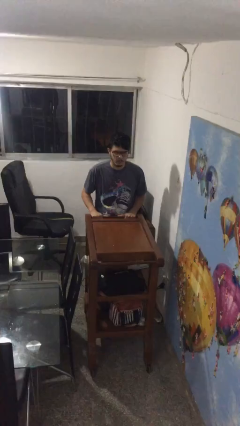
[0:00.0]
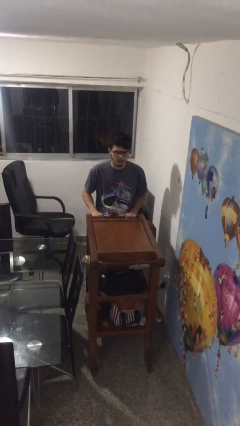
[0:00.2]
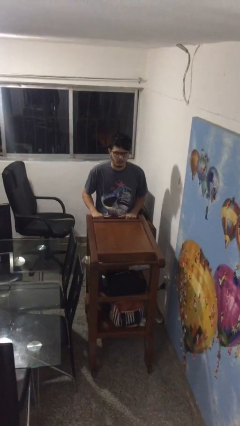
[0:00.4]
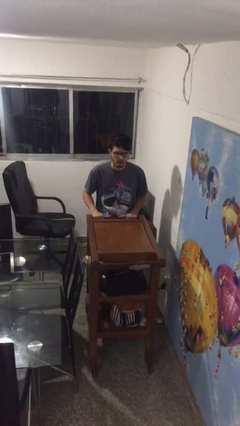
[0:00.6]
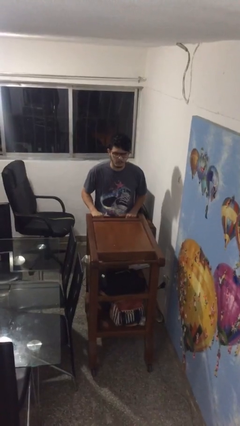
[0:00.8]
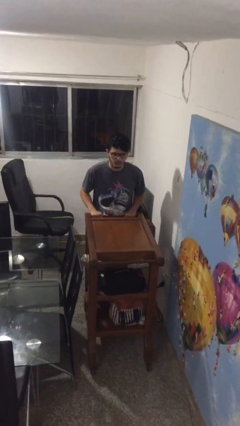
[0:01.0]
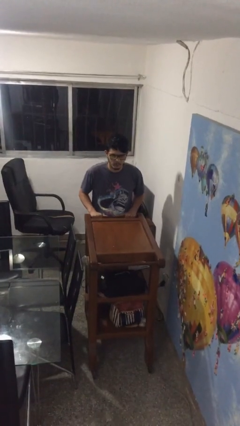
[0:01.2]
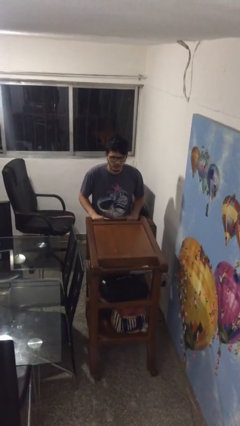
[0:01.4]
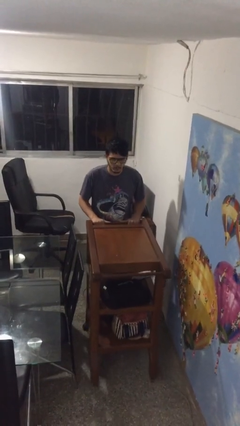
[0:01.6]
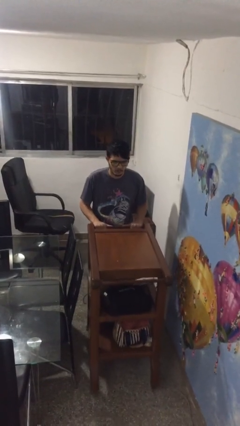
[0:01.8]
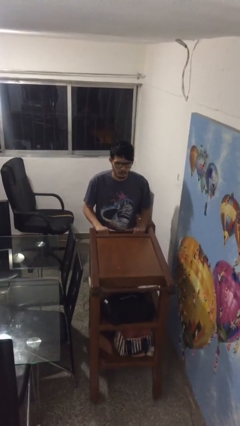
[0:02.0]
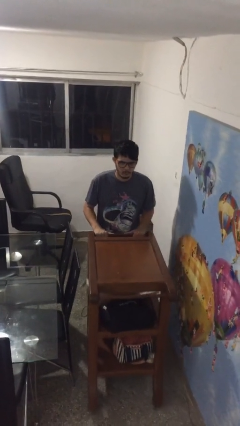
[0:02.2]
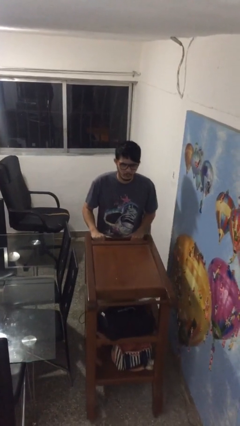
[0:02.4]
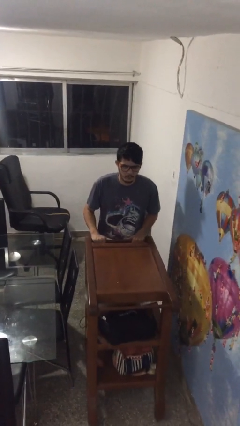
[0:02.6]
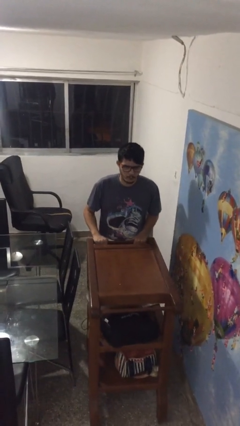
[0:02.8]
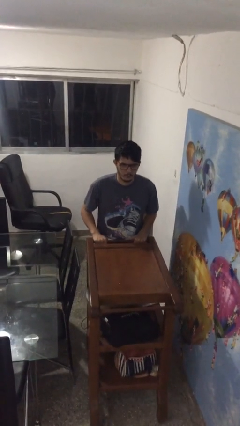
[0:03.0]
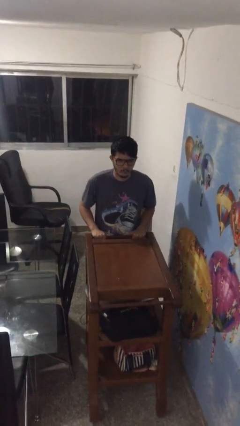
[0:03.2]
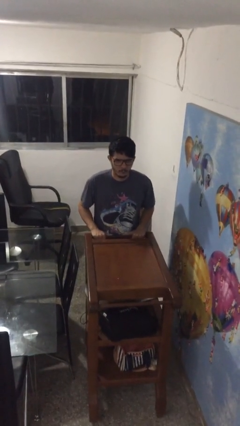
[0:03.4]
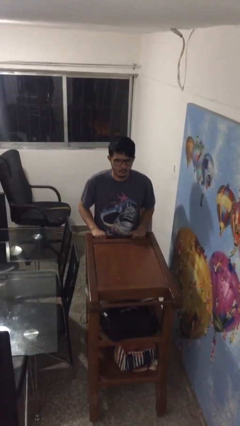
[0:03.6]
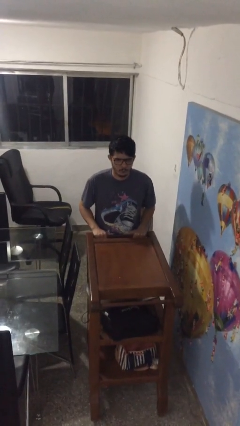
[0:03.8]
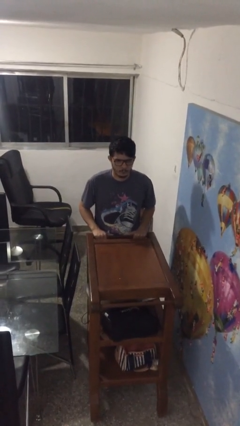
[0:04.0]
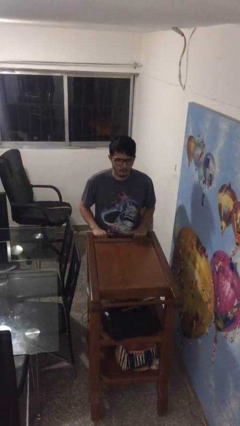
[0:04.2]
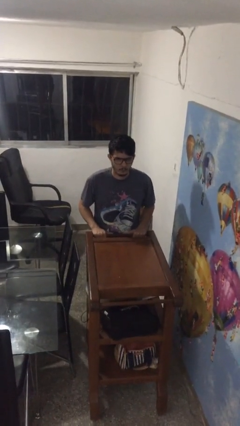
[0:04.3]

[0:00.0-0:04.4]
person pushes wheeled cart

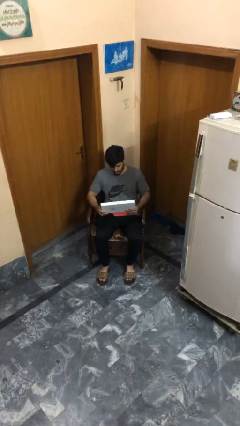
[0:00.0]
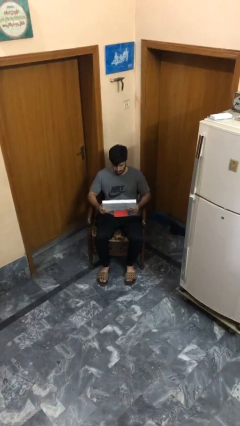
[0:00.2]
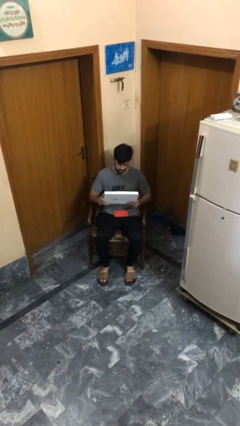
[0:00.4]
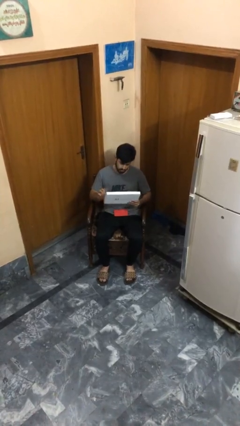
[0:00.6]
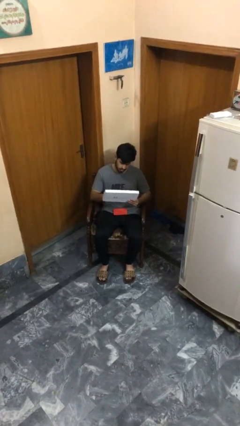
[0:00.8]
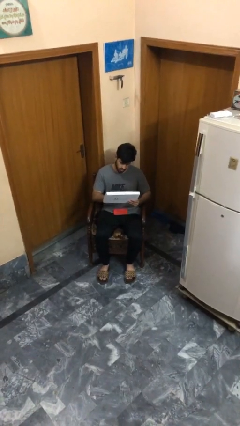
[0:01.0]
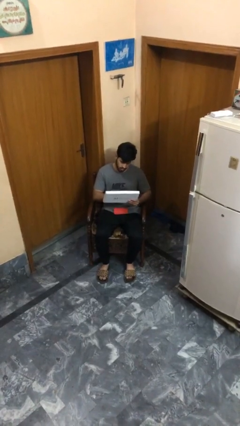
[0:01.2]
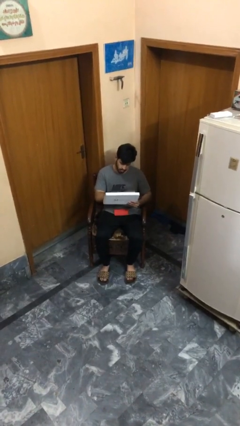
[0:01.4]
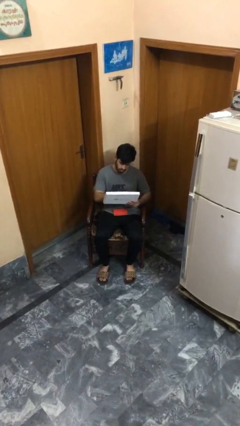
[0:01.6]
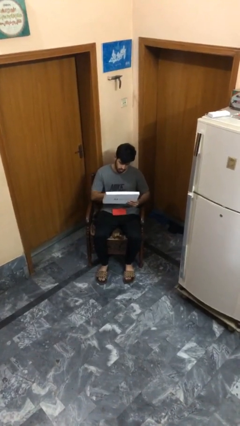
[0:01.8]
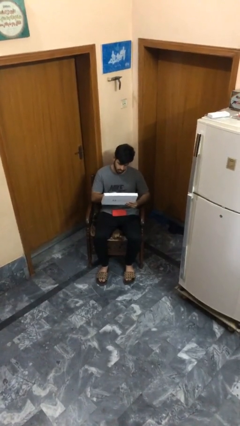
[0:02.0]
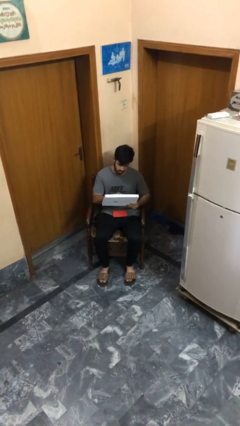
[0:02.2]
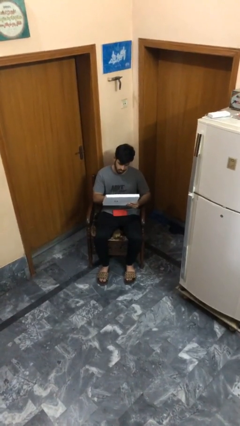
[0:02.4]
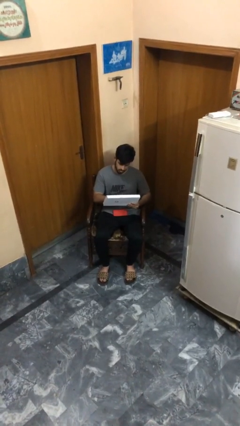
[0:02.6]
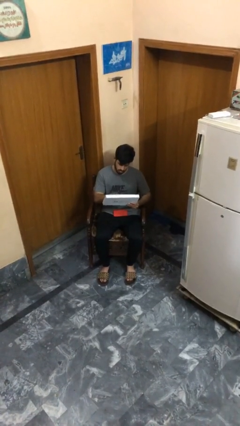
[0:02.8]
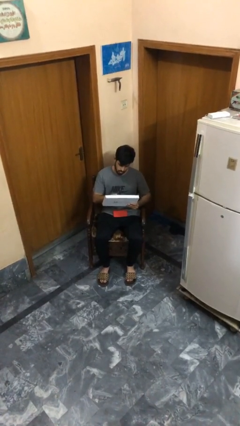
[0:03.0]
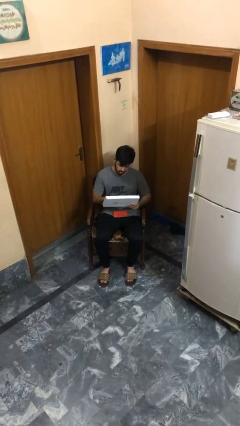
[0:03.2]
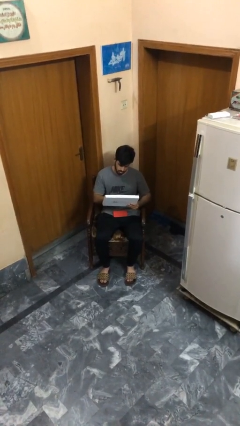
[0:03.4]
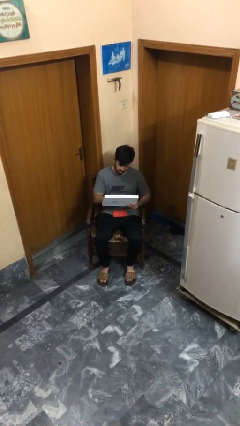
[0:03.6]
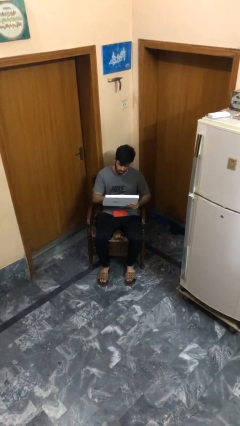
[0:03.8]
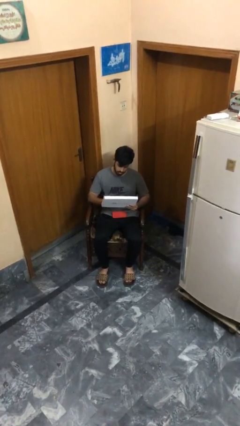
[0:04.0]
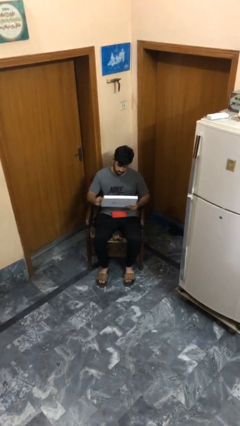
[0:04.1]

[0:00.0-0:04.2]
person interacts with tablet

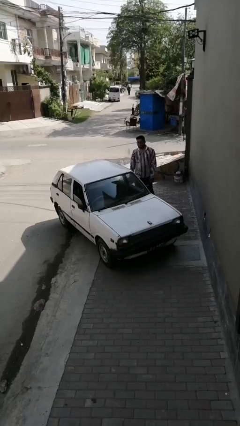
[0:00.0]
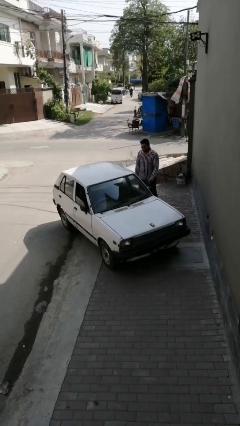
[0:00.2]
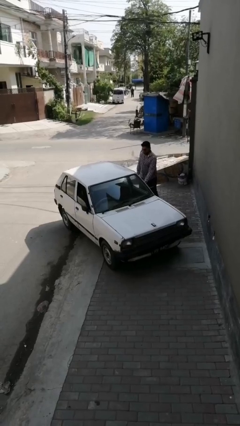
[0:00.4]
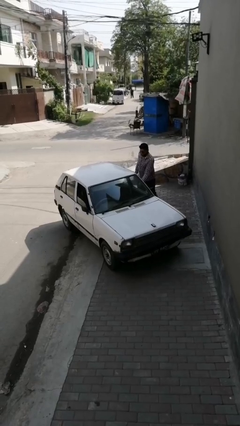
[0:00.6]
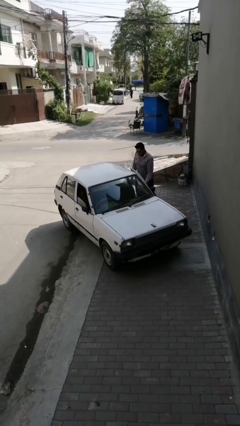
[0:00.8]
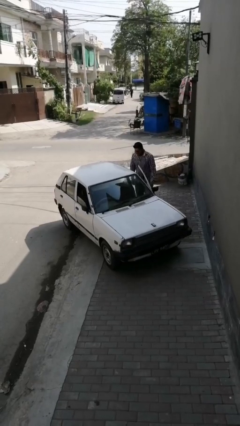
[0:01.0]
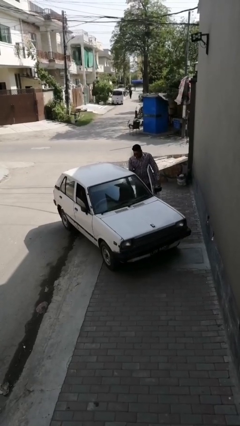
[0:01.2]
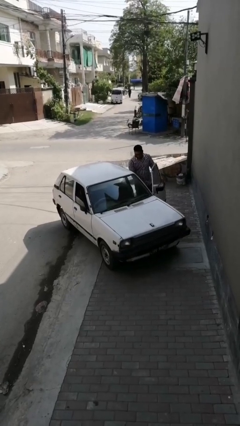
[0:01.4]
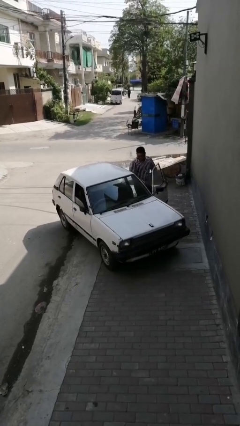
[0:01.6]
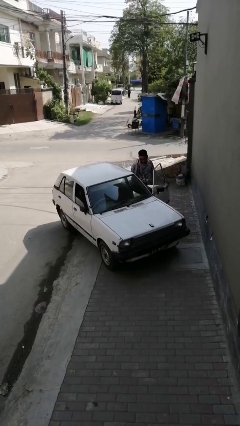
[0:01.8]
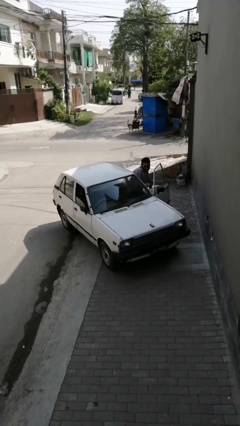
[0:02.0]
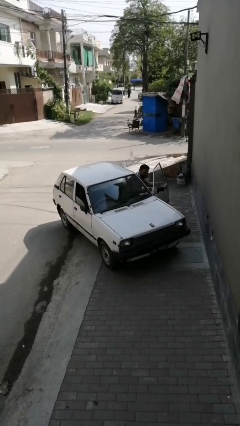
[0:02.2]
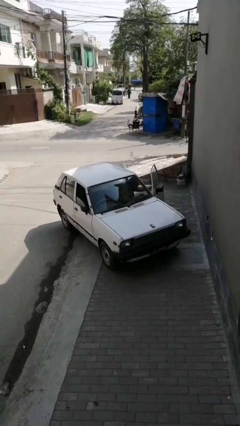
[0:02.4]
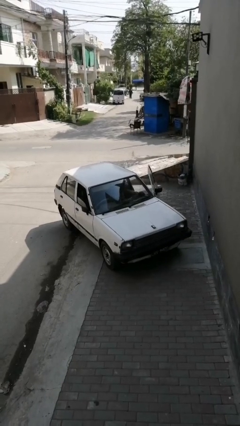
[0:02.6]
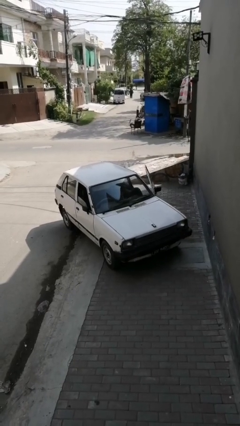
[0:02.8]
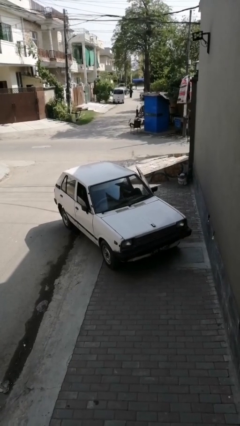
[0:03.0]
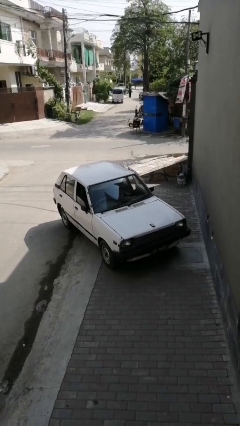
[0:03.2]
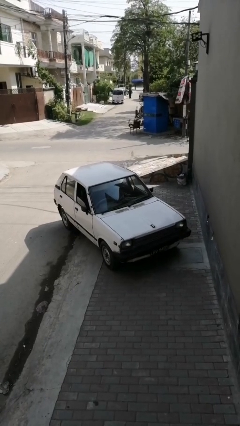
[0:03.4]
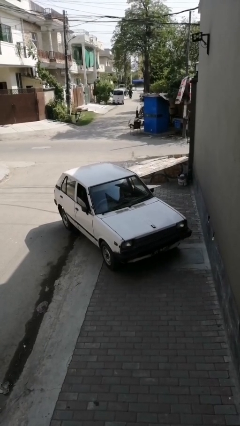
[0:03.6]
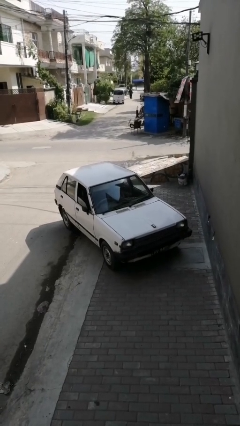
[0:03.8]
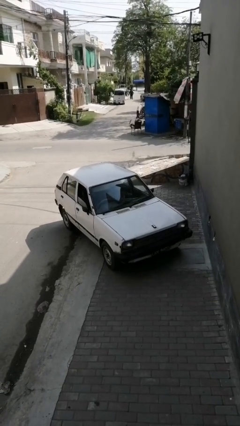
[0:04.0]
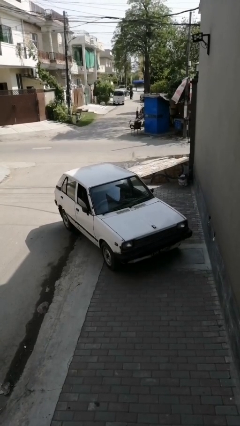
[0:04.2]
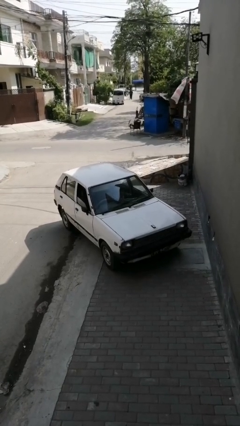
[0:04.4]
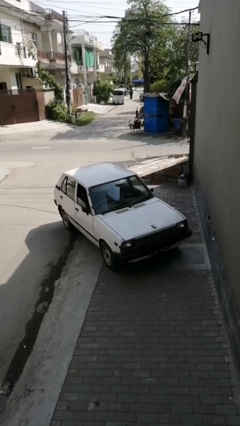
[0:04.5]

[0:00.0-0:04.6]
car picks up person

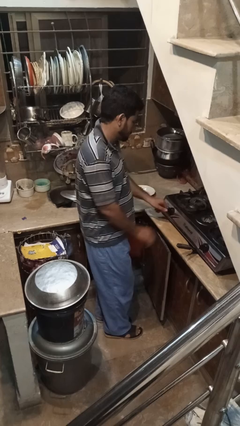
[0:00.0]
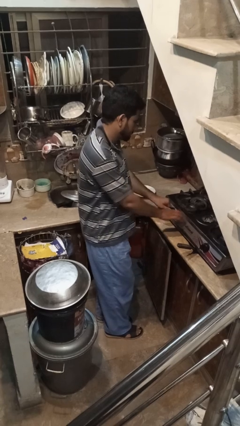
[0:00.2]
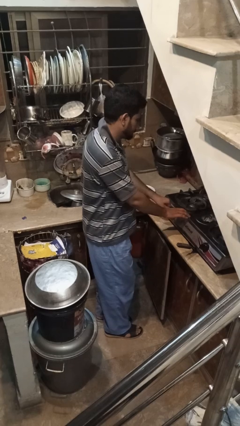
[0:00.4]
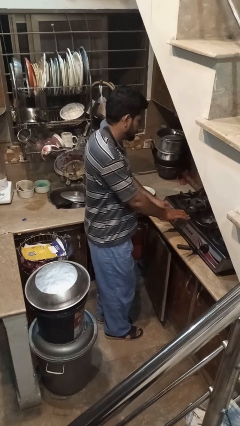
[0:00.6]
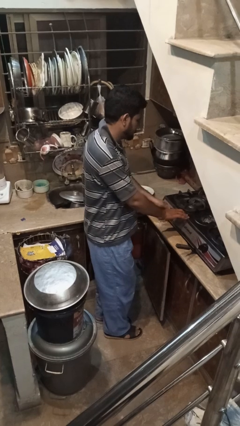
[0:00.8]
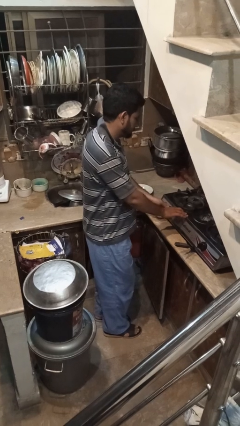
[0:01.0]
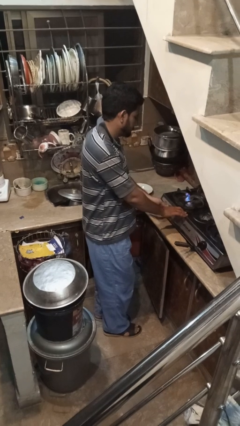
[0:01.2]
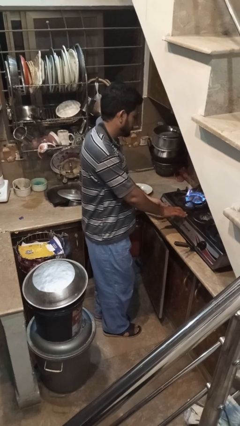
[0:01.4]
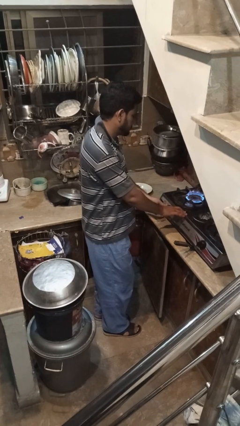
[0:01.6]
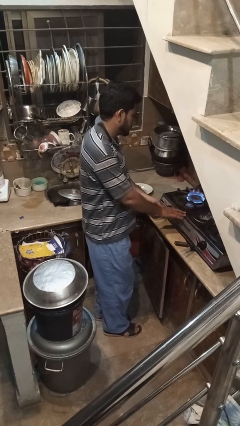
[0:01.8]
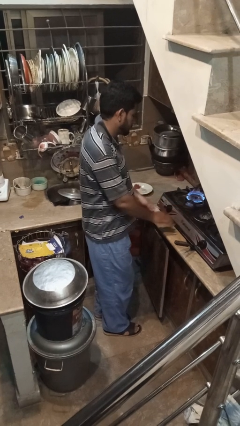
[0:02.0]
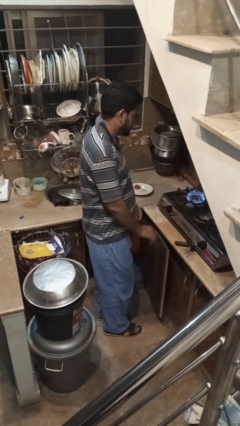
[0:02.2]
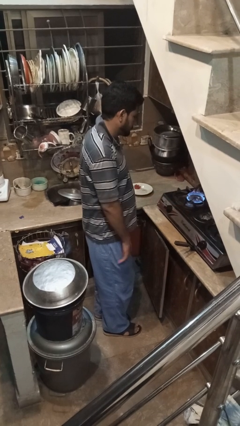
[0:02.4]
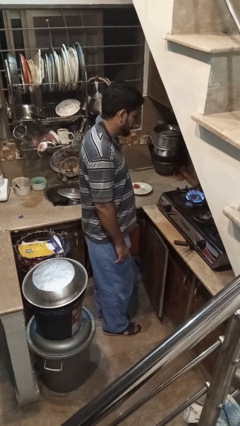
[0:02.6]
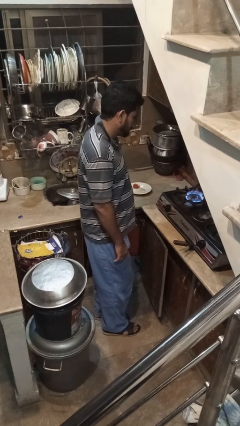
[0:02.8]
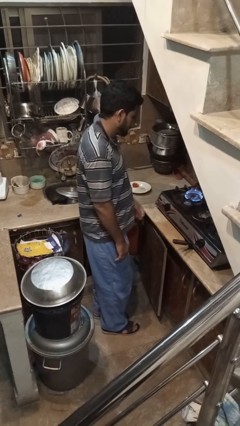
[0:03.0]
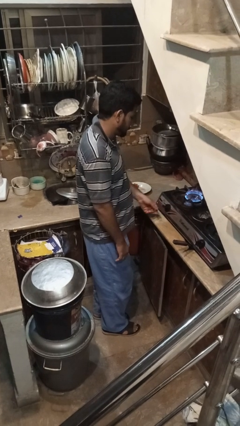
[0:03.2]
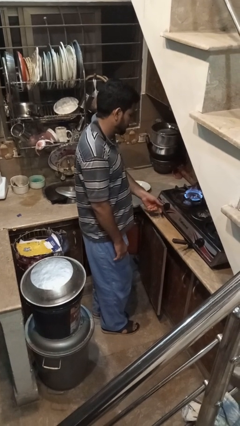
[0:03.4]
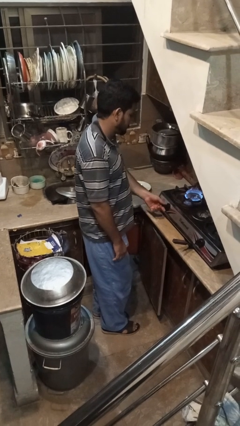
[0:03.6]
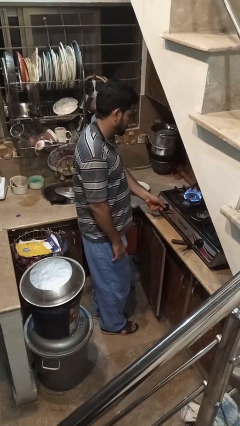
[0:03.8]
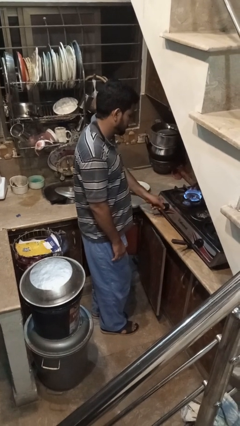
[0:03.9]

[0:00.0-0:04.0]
person turns on stovetop

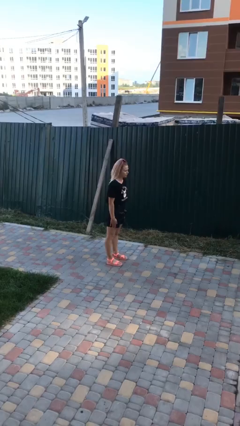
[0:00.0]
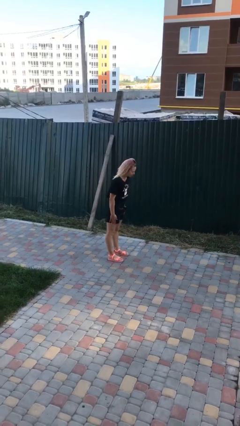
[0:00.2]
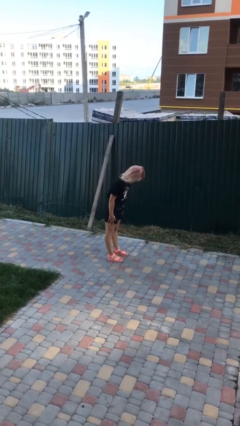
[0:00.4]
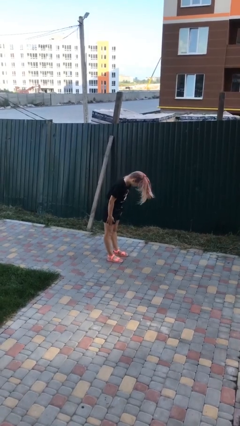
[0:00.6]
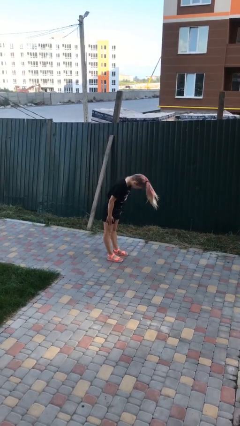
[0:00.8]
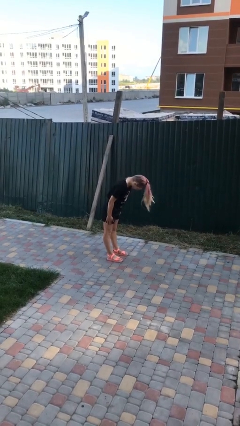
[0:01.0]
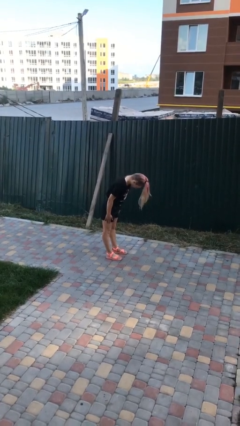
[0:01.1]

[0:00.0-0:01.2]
person bows
